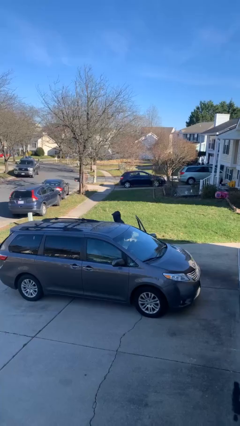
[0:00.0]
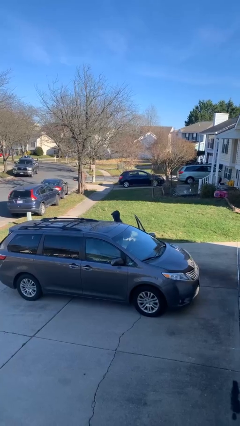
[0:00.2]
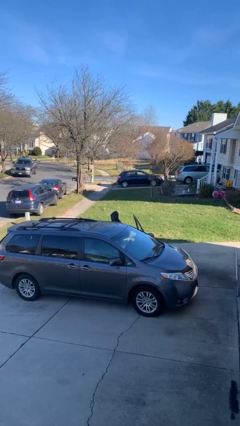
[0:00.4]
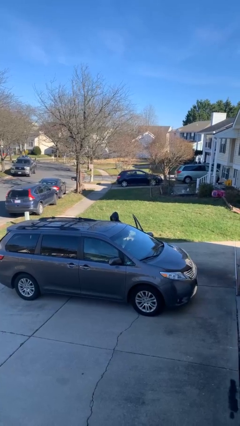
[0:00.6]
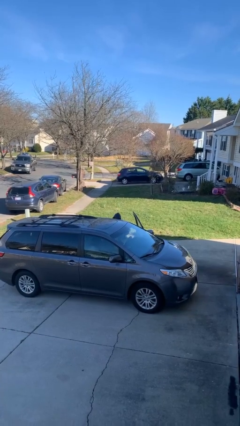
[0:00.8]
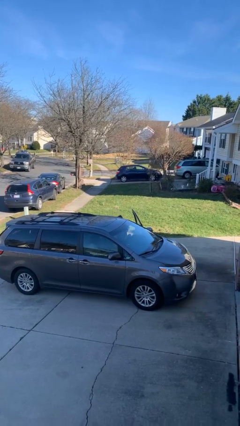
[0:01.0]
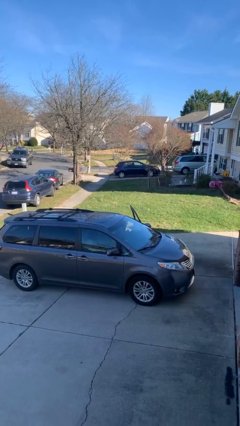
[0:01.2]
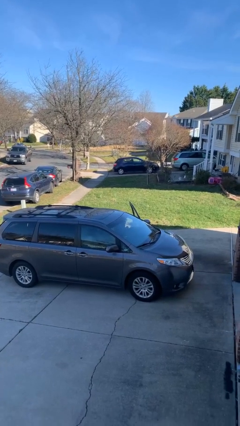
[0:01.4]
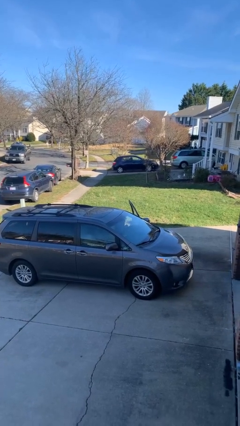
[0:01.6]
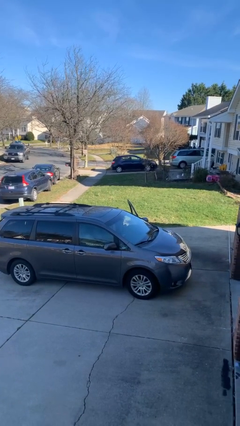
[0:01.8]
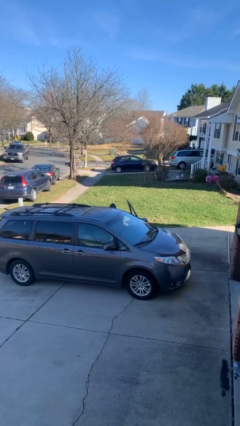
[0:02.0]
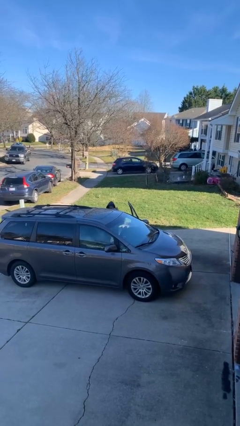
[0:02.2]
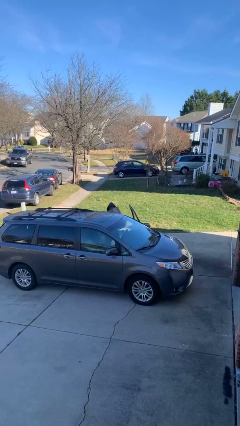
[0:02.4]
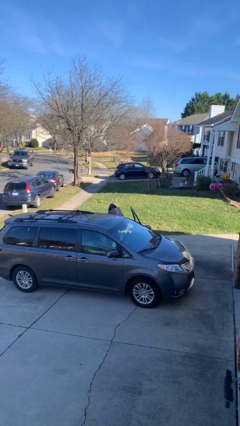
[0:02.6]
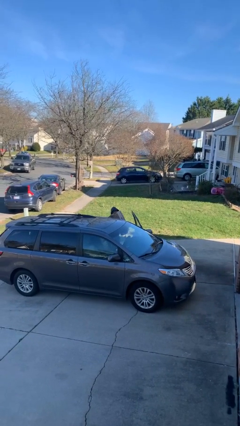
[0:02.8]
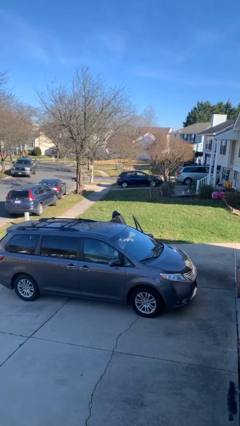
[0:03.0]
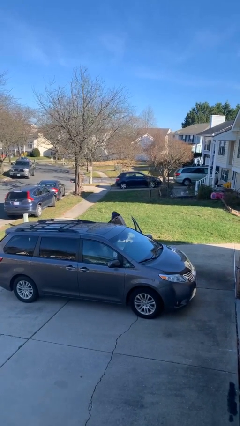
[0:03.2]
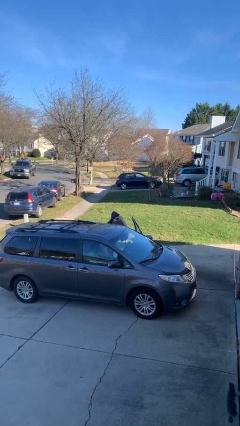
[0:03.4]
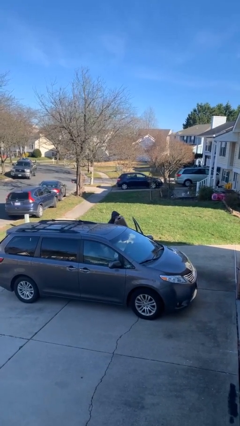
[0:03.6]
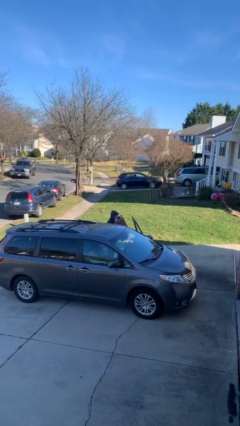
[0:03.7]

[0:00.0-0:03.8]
person unloads car

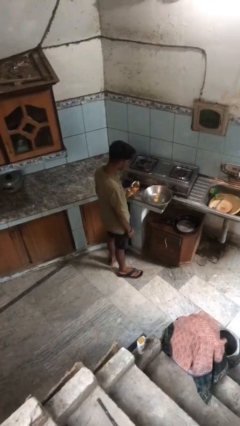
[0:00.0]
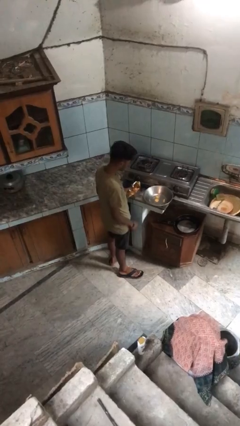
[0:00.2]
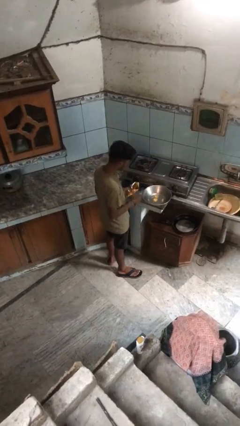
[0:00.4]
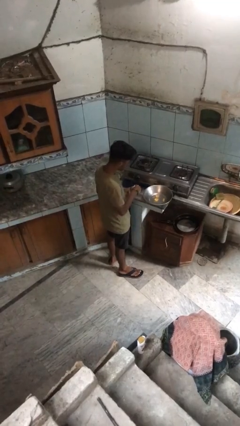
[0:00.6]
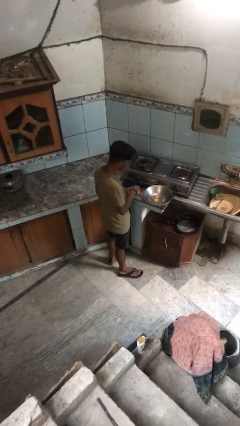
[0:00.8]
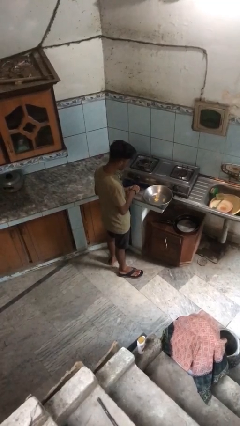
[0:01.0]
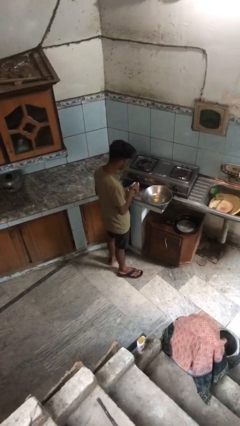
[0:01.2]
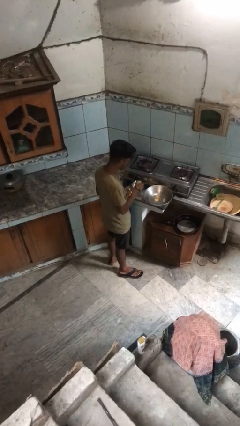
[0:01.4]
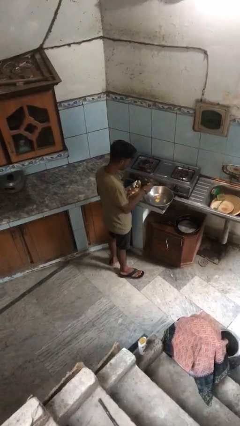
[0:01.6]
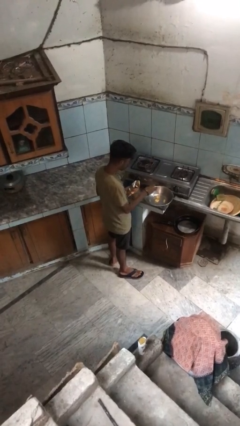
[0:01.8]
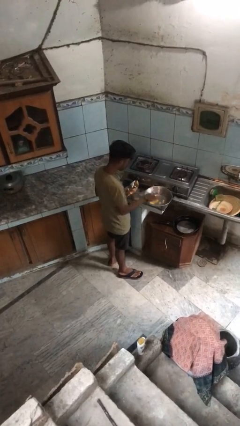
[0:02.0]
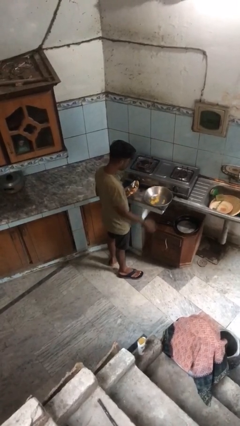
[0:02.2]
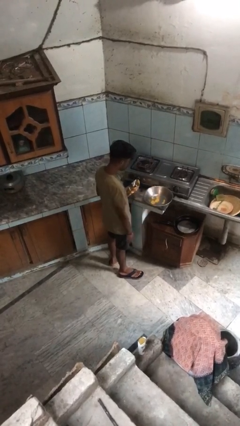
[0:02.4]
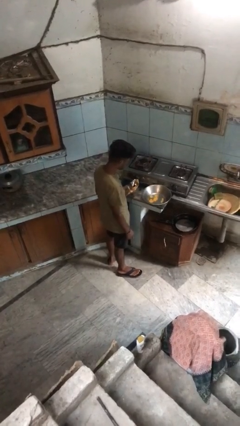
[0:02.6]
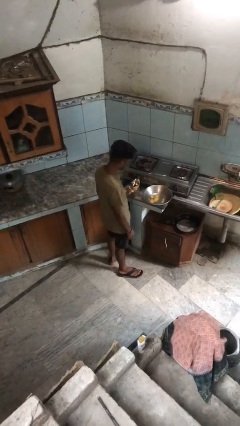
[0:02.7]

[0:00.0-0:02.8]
person pours into bowl

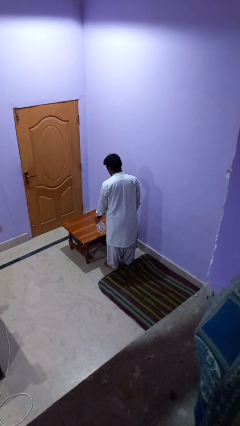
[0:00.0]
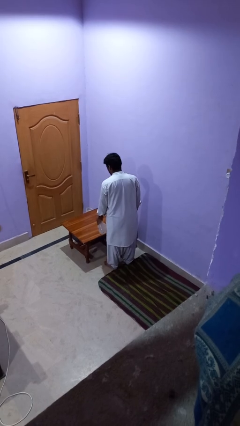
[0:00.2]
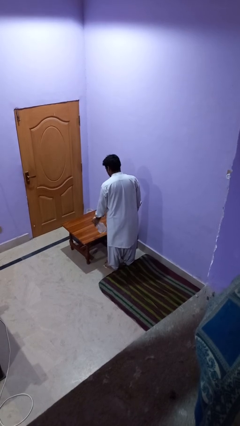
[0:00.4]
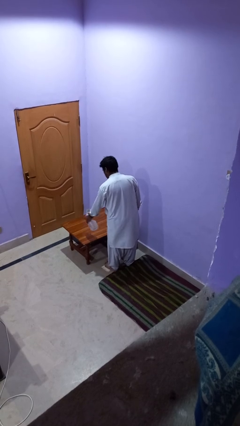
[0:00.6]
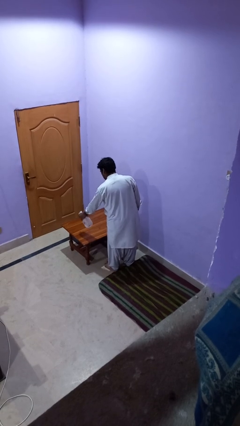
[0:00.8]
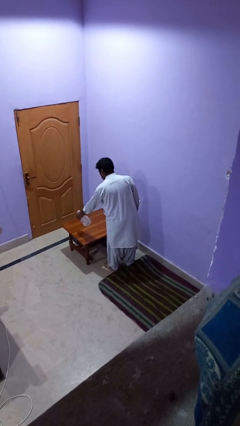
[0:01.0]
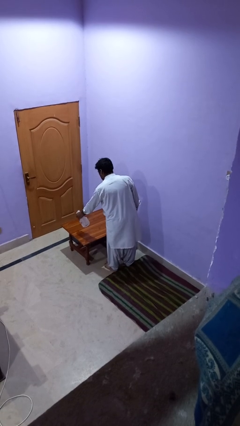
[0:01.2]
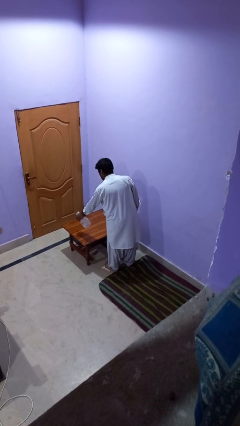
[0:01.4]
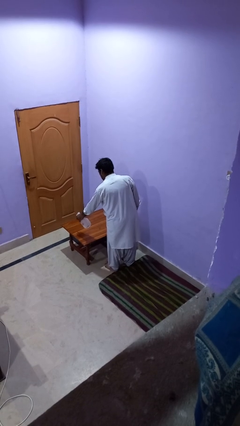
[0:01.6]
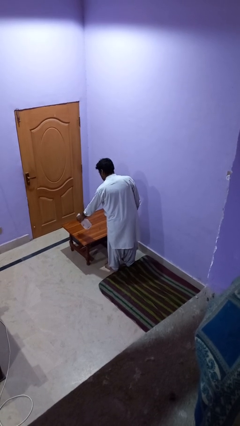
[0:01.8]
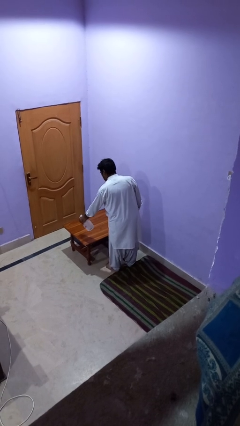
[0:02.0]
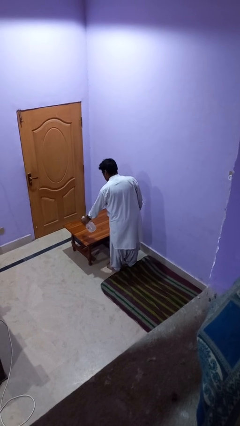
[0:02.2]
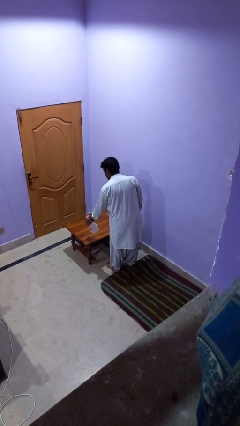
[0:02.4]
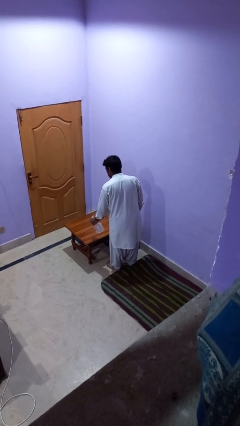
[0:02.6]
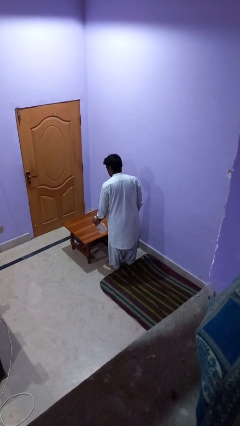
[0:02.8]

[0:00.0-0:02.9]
person sprays from bottle

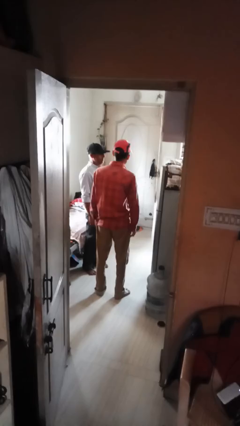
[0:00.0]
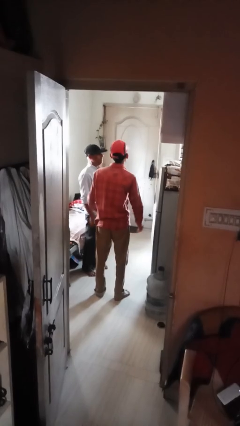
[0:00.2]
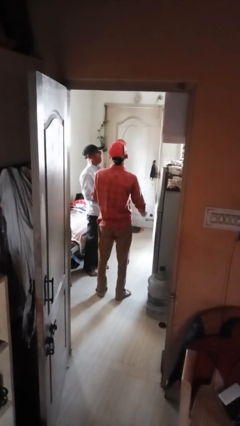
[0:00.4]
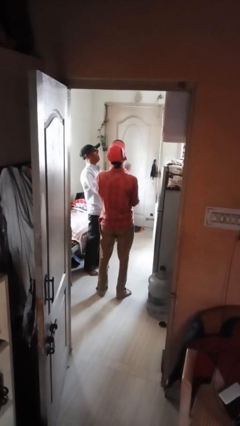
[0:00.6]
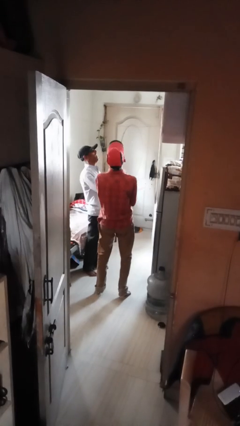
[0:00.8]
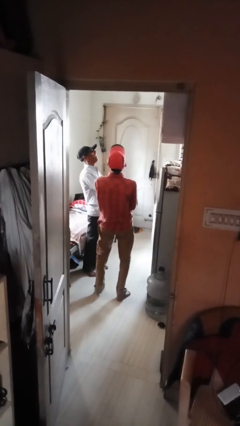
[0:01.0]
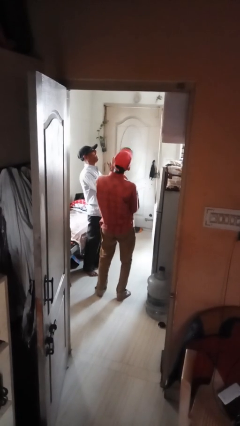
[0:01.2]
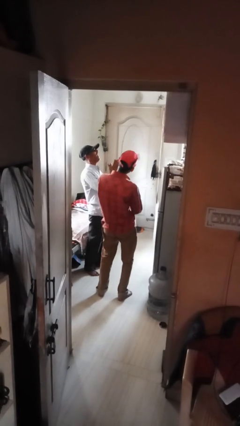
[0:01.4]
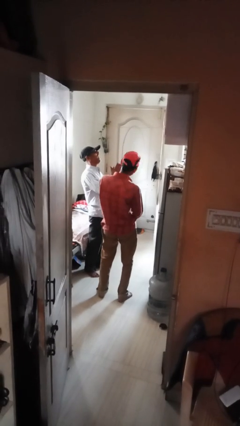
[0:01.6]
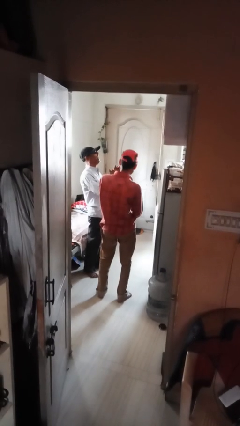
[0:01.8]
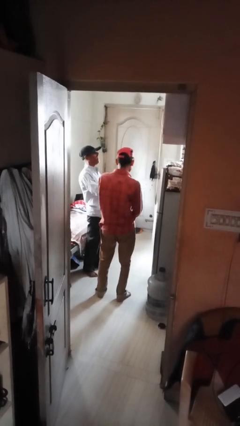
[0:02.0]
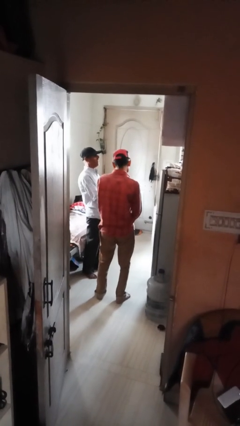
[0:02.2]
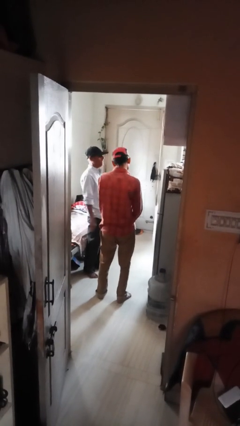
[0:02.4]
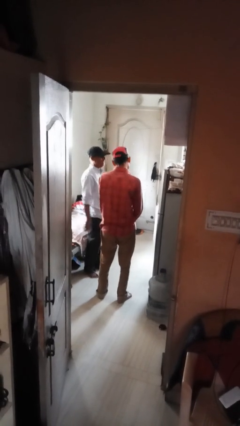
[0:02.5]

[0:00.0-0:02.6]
person laughs with person

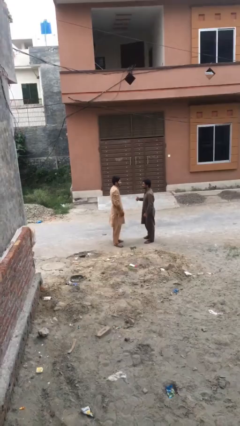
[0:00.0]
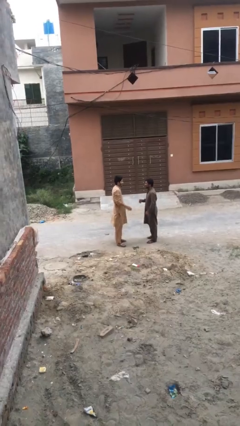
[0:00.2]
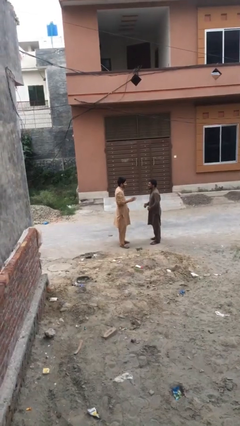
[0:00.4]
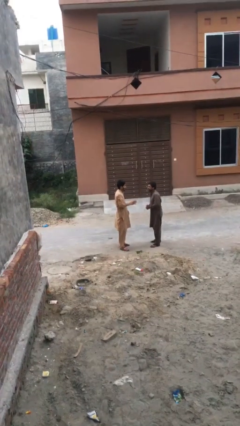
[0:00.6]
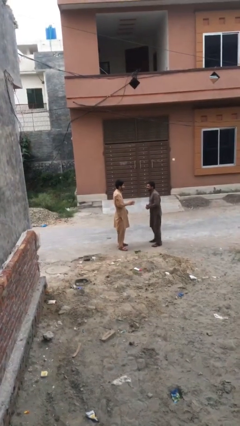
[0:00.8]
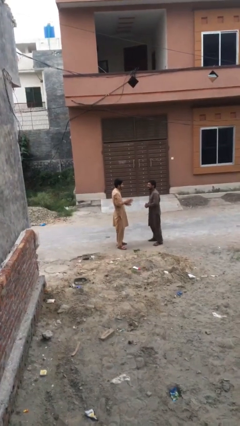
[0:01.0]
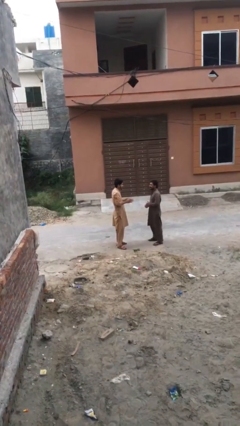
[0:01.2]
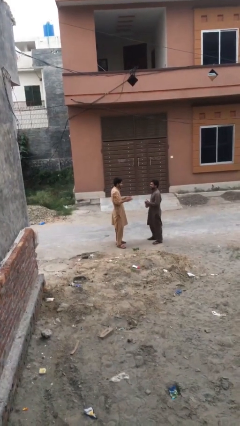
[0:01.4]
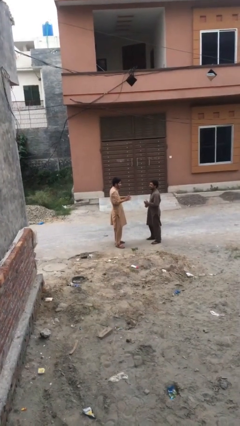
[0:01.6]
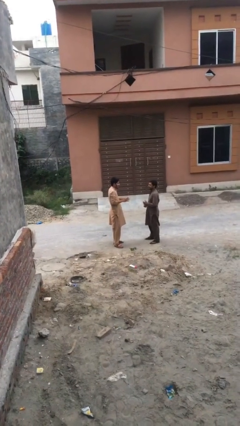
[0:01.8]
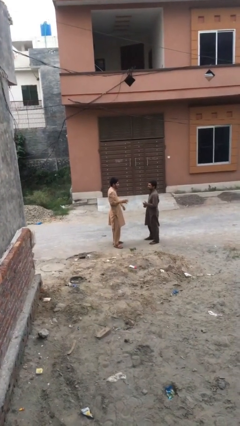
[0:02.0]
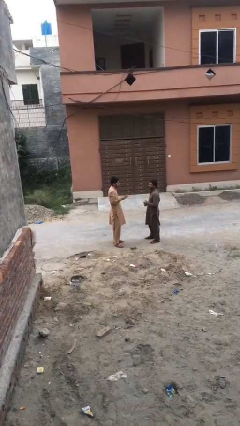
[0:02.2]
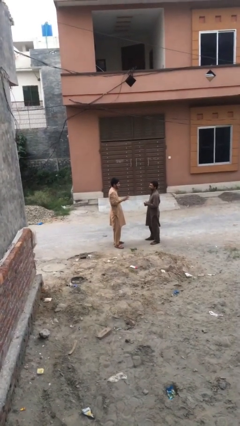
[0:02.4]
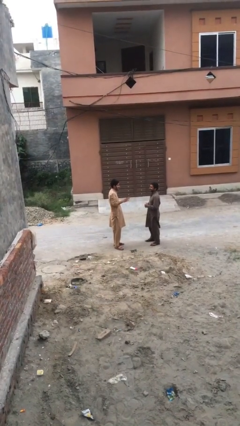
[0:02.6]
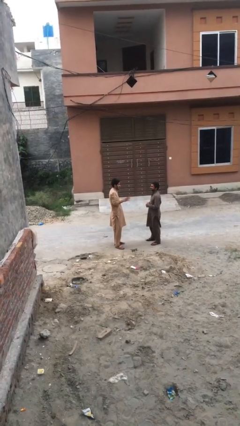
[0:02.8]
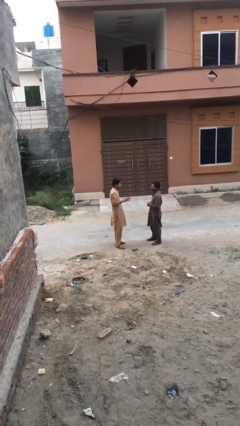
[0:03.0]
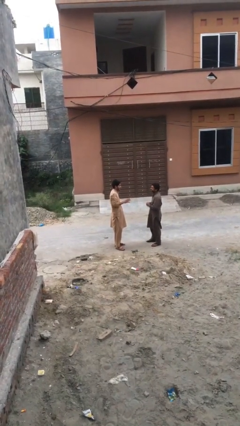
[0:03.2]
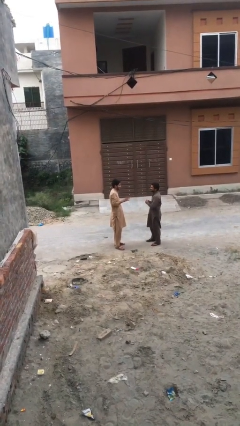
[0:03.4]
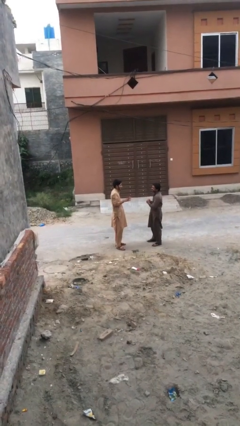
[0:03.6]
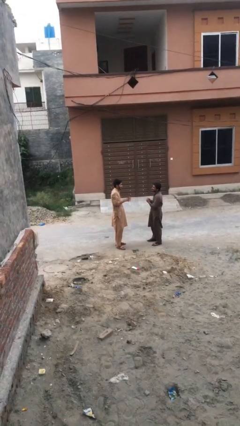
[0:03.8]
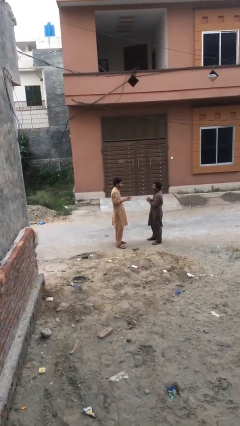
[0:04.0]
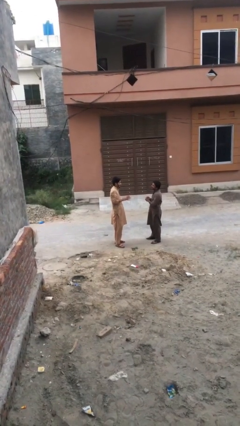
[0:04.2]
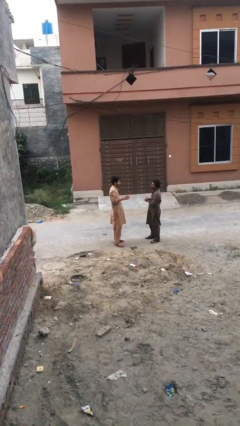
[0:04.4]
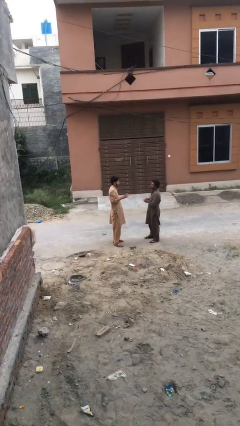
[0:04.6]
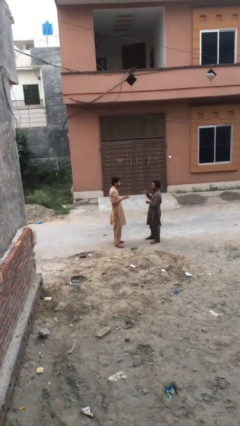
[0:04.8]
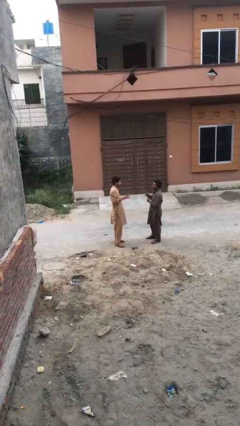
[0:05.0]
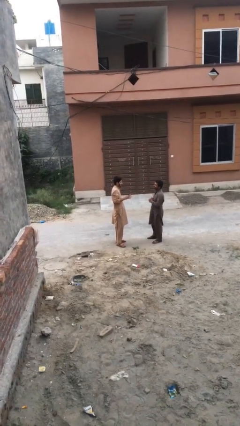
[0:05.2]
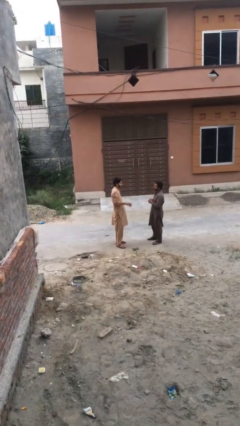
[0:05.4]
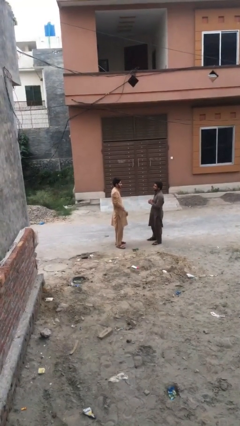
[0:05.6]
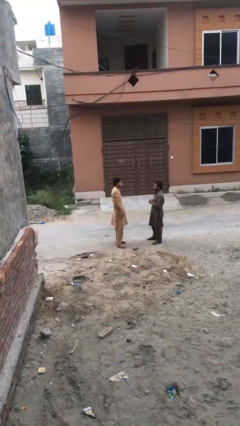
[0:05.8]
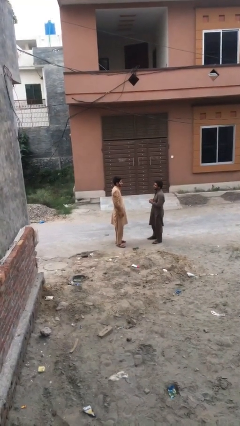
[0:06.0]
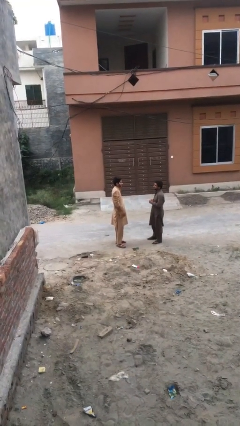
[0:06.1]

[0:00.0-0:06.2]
person talks to person
